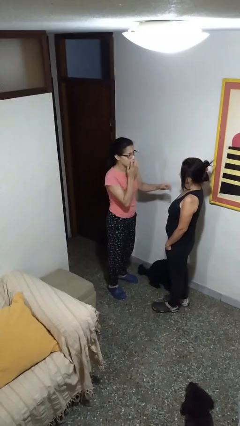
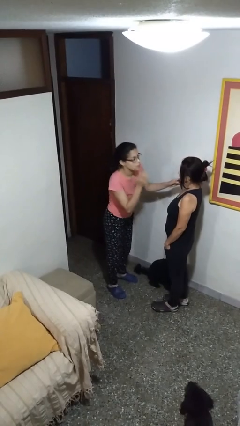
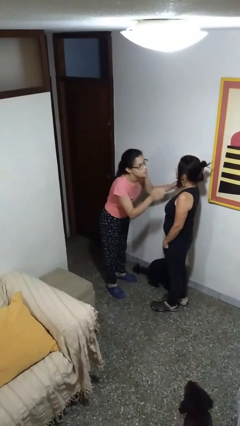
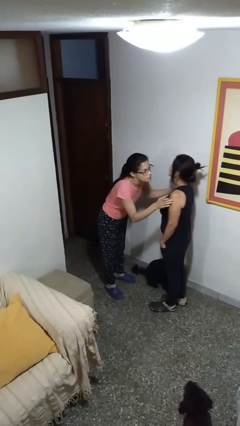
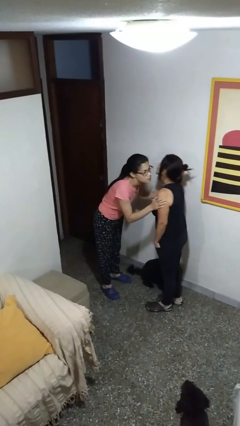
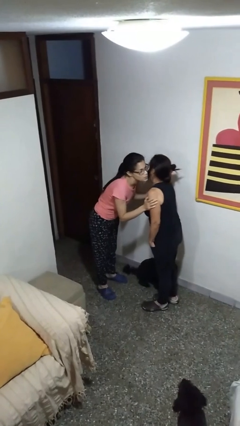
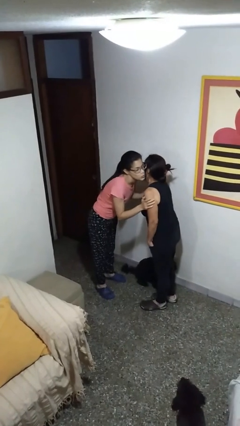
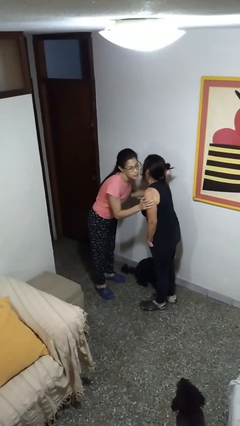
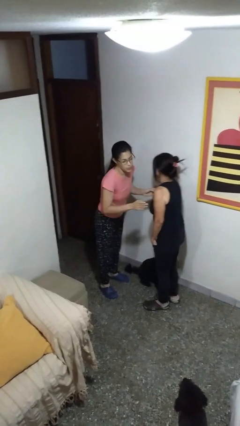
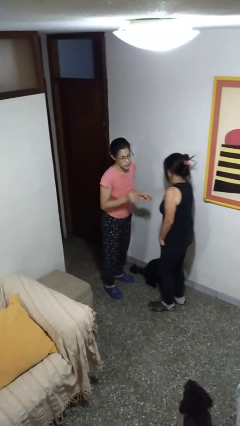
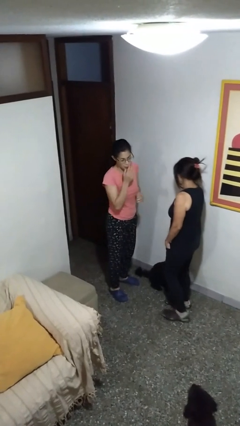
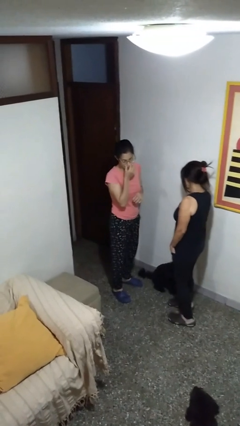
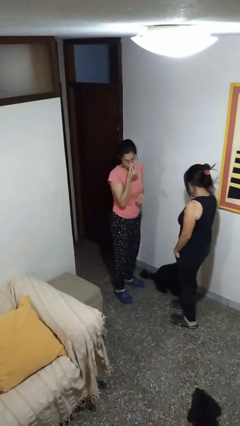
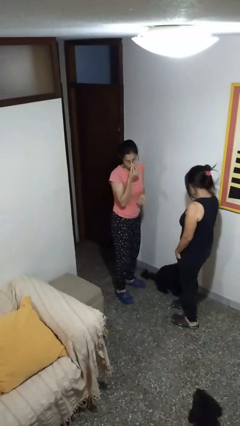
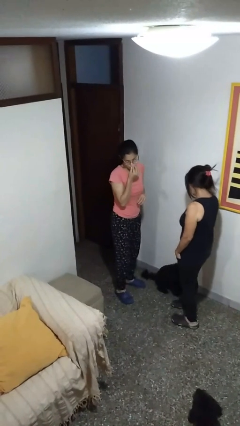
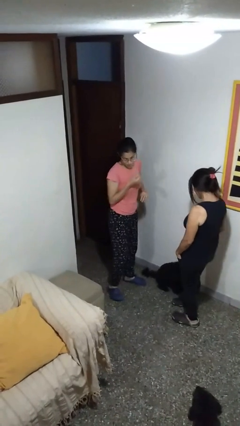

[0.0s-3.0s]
person kisses cheek of person

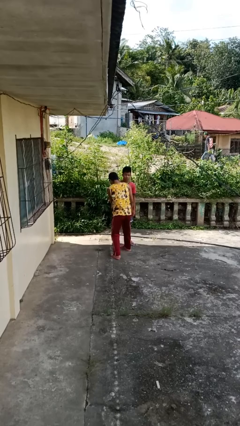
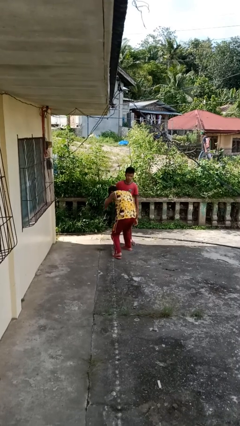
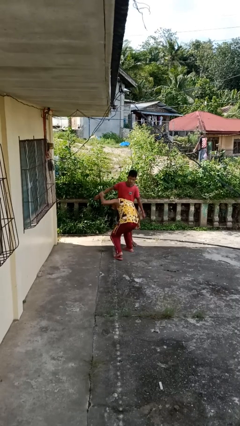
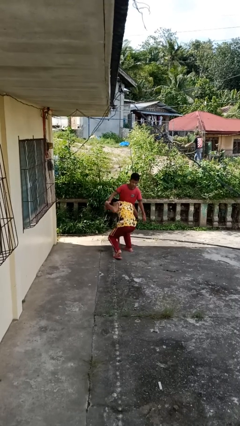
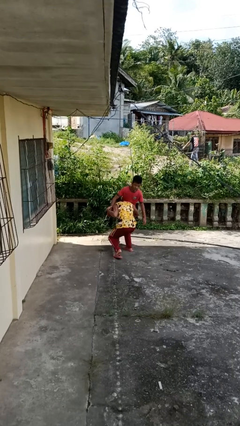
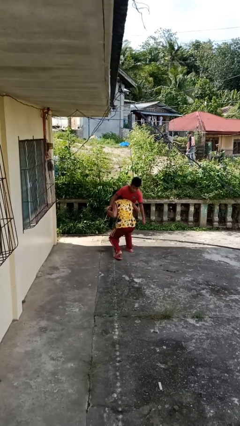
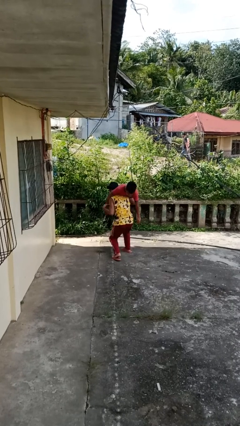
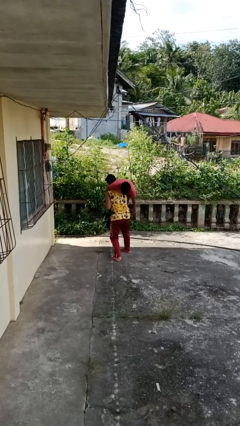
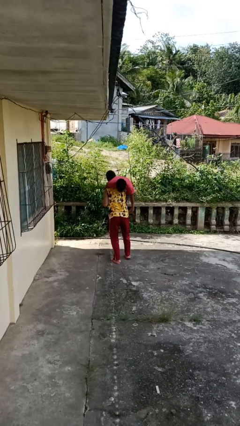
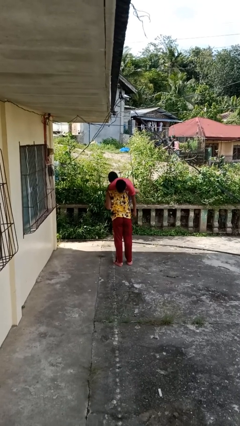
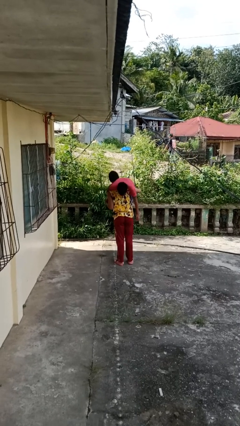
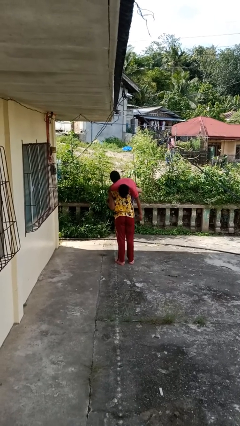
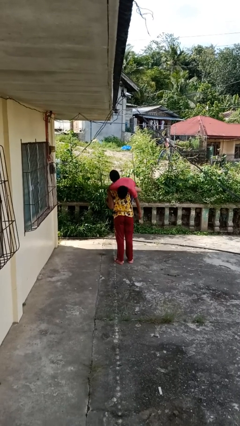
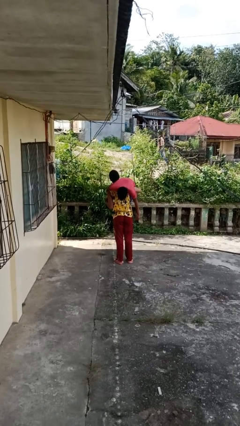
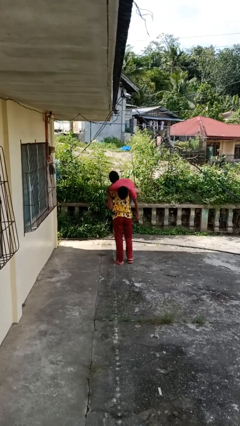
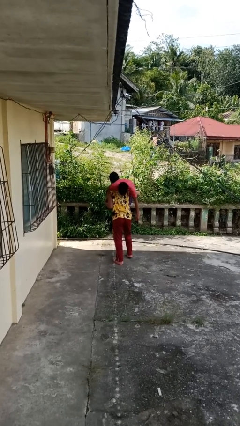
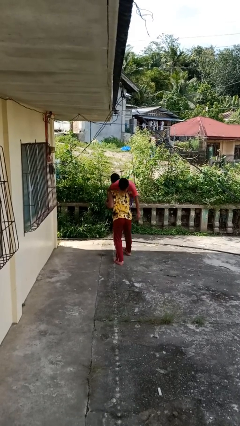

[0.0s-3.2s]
person carries person over shoulder

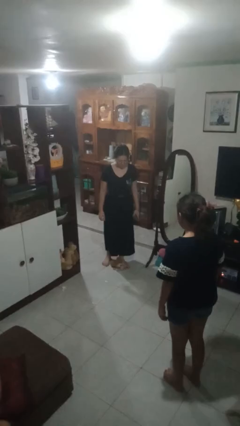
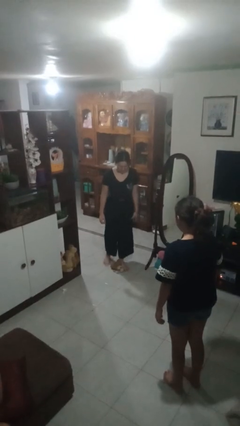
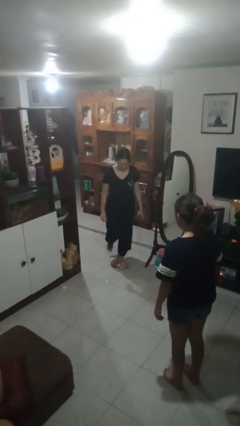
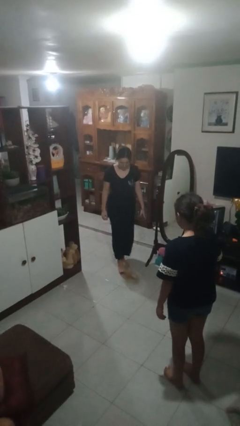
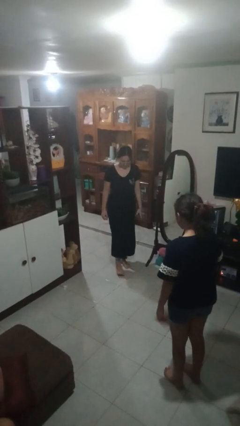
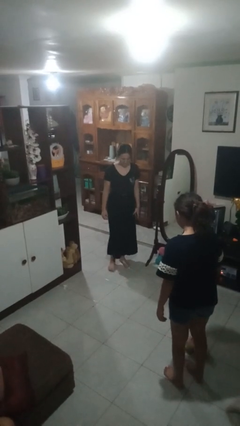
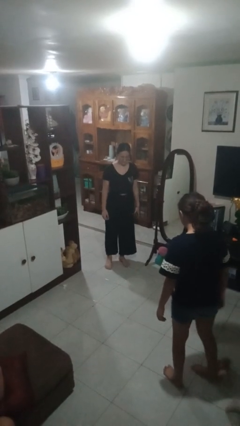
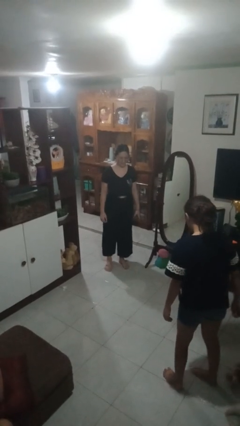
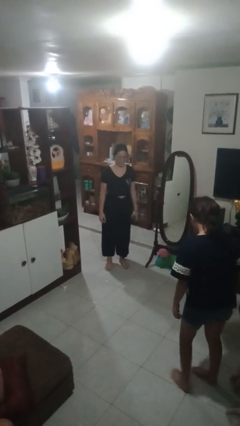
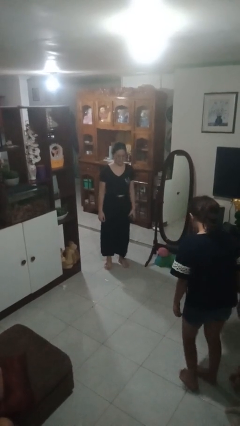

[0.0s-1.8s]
person kicks object to person

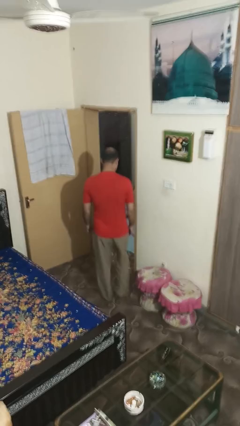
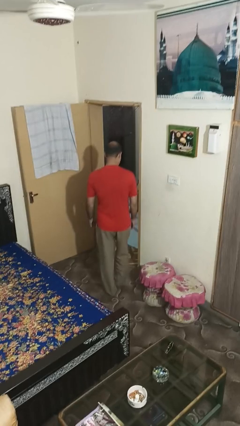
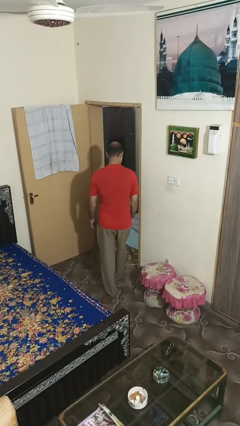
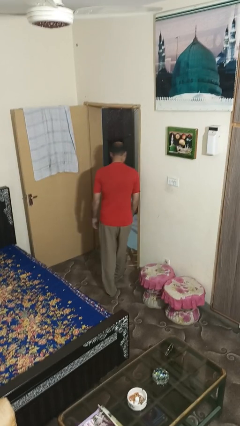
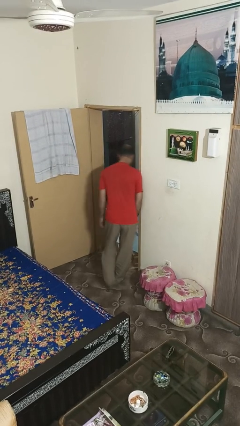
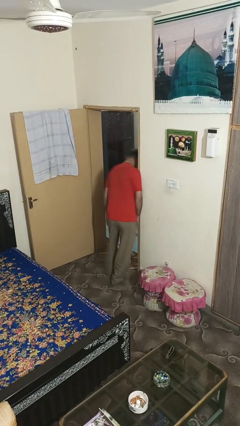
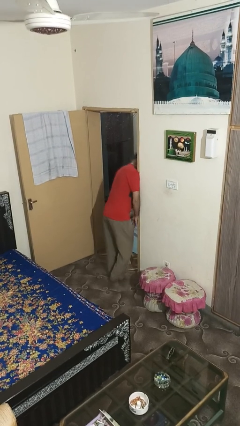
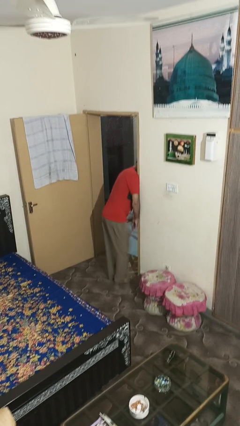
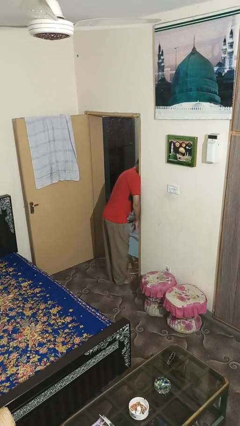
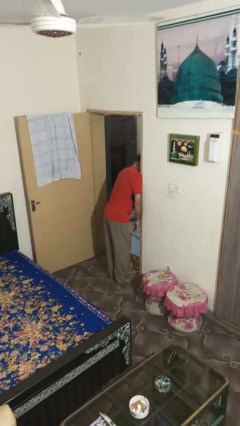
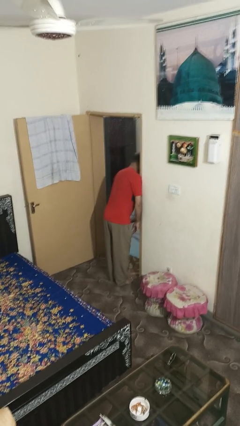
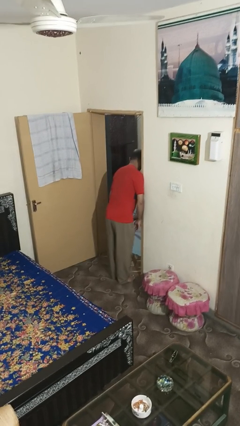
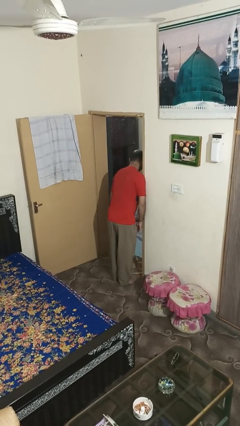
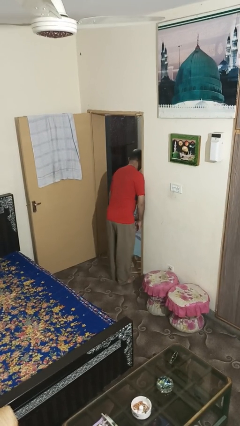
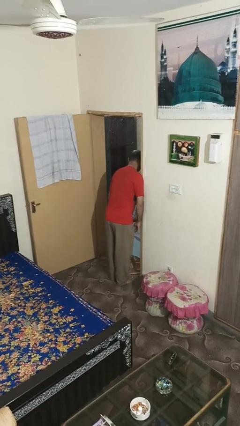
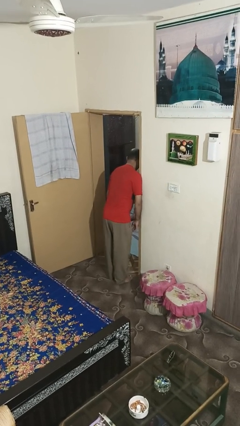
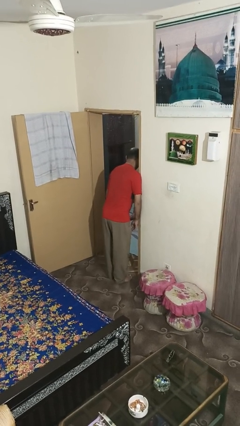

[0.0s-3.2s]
person bumps into wall

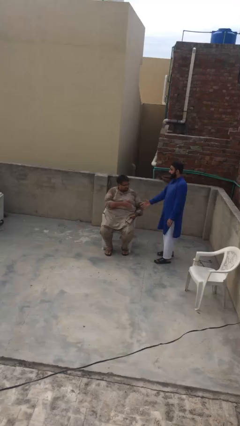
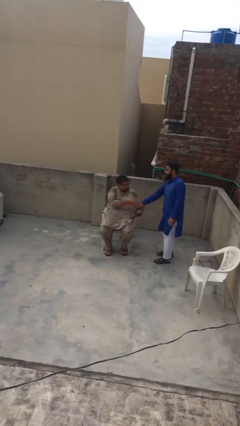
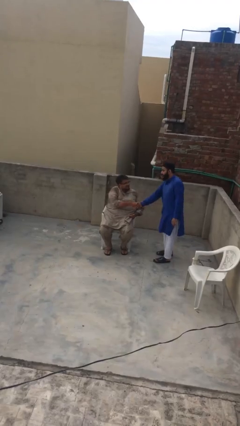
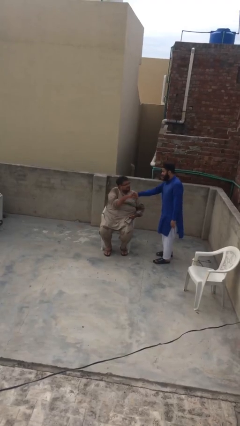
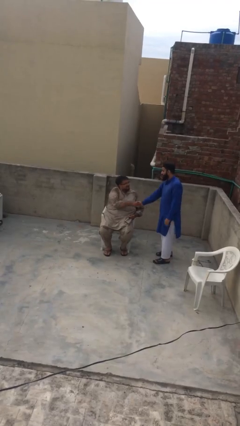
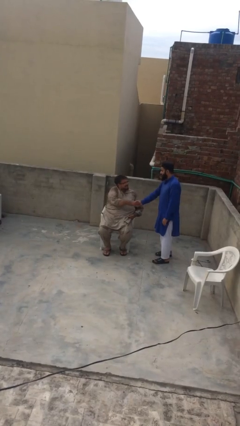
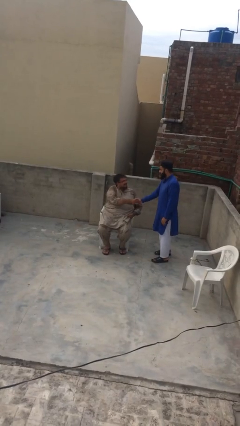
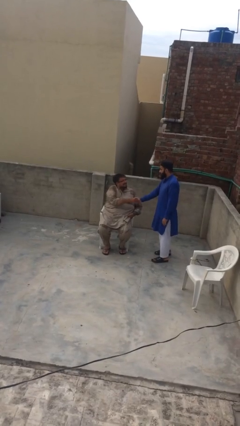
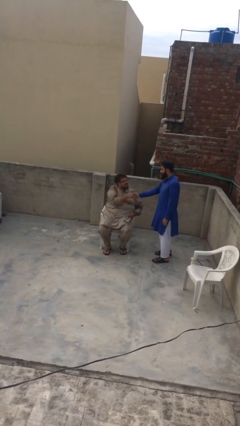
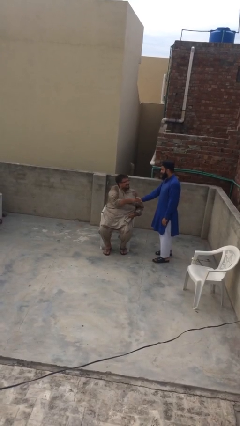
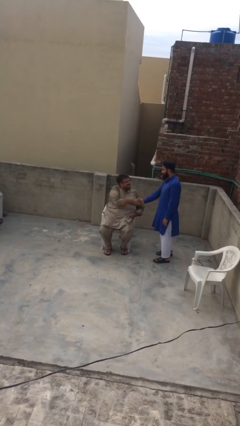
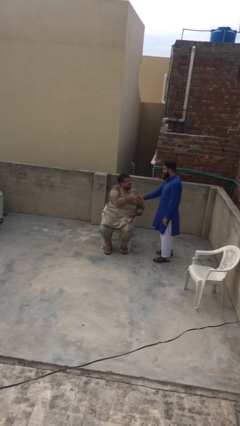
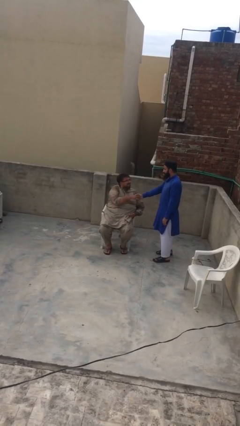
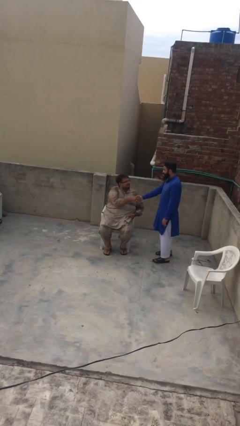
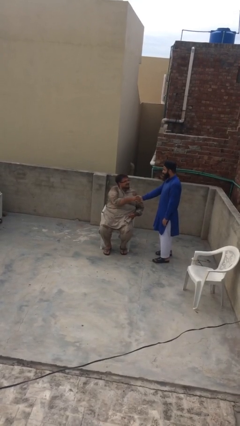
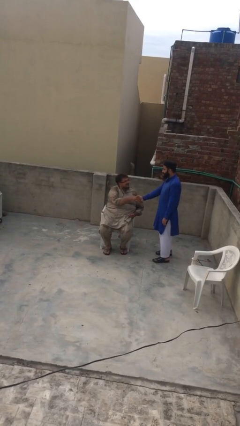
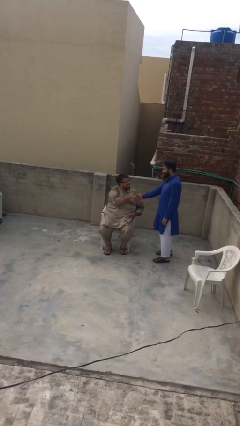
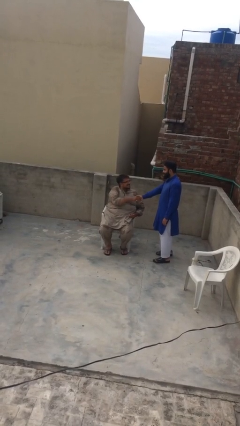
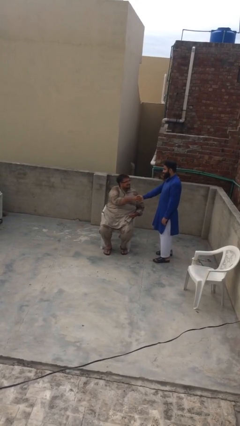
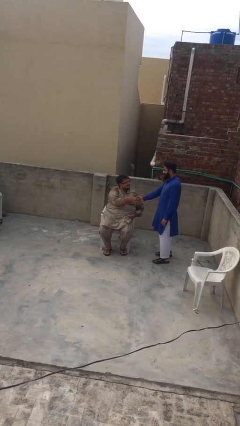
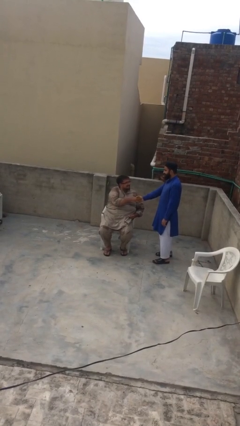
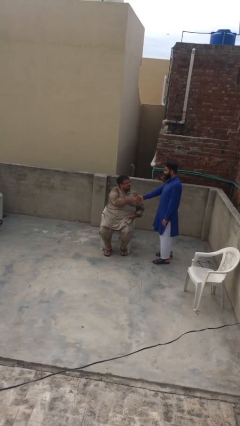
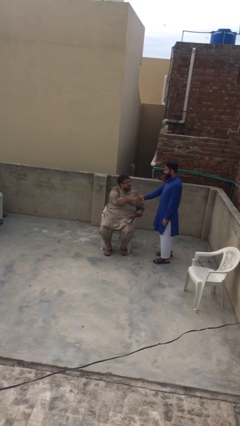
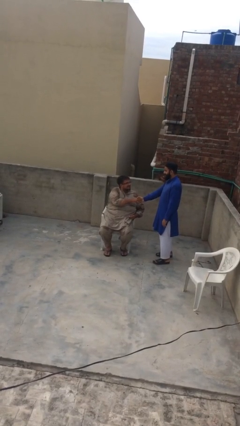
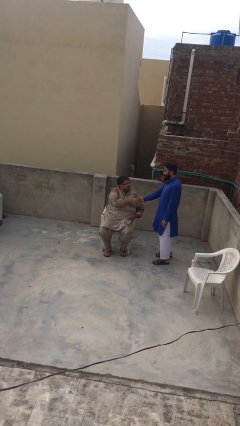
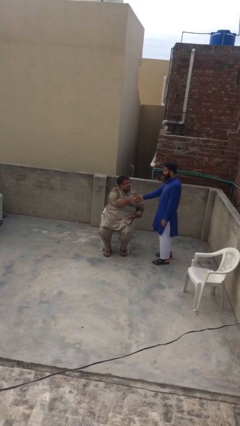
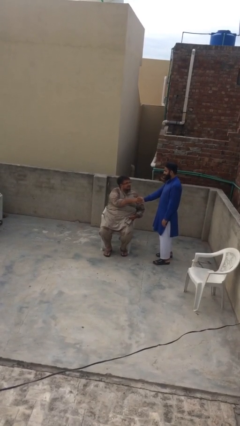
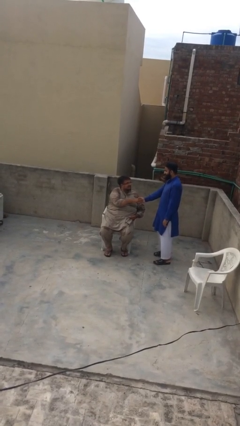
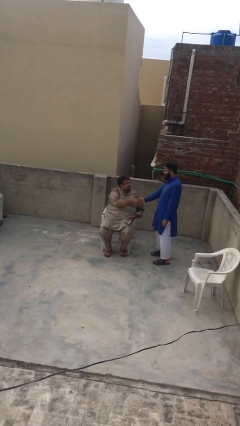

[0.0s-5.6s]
person shakes hand

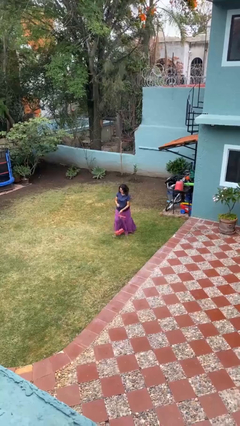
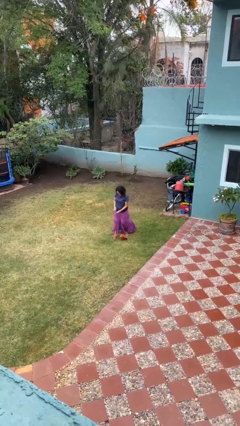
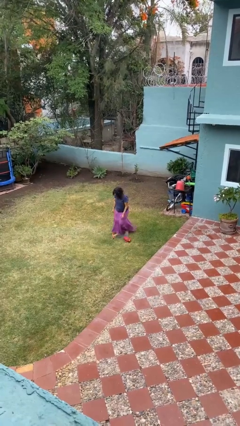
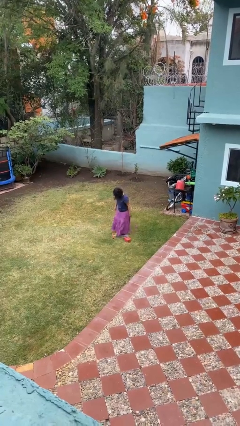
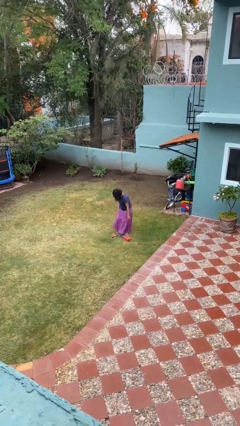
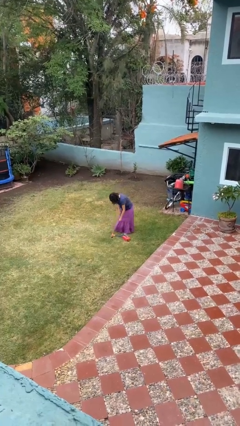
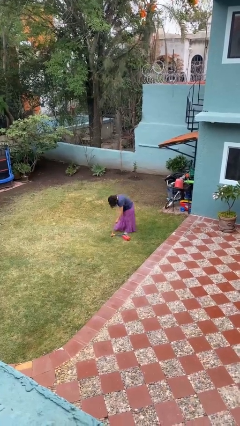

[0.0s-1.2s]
person drops object
